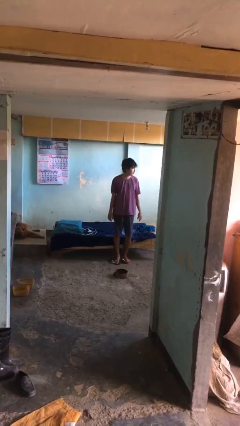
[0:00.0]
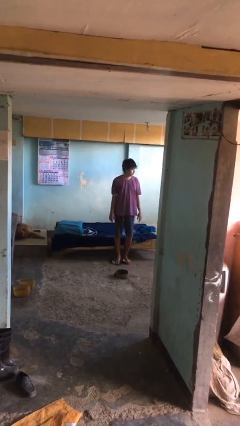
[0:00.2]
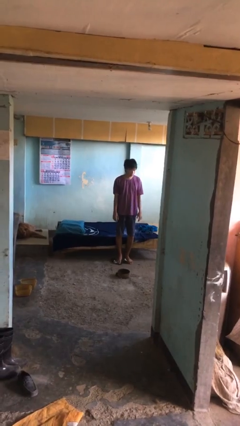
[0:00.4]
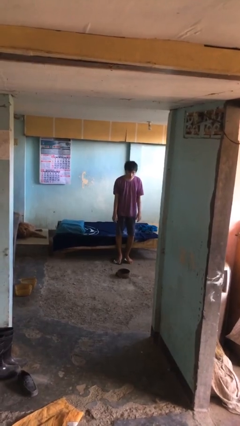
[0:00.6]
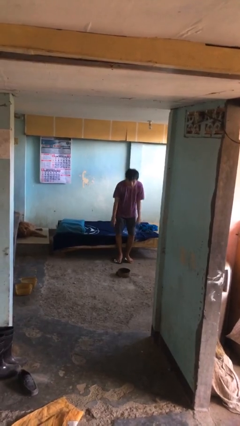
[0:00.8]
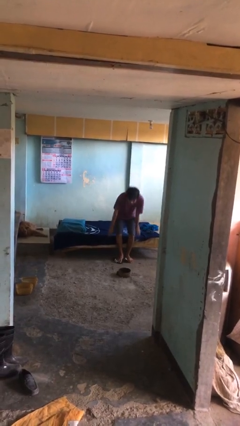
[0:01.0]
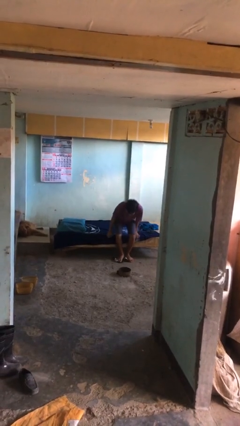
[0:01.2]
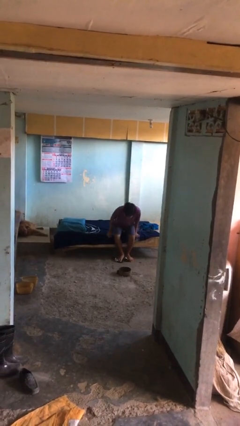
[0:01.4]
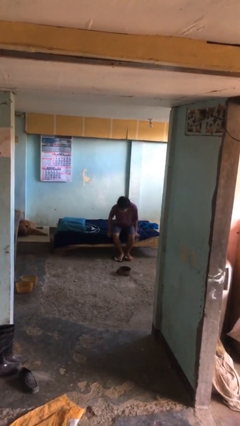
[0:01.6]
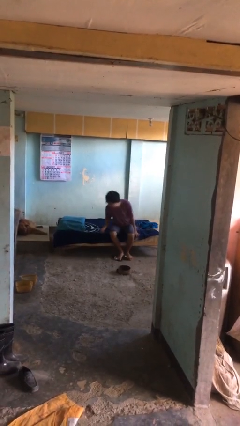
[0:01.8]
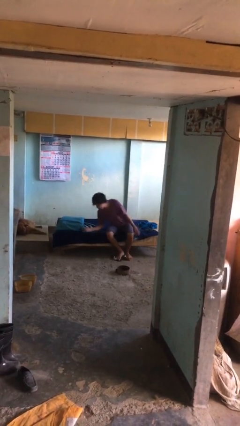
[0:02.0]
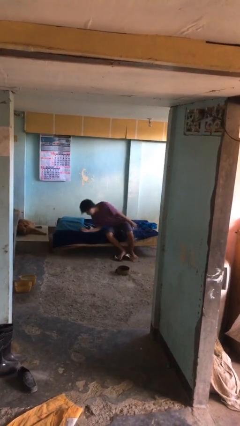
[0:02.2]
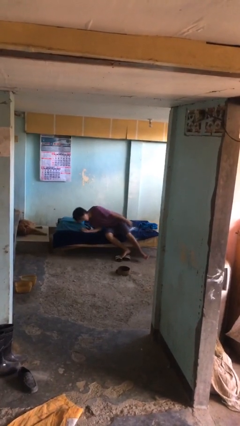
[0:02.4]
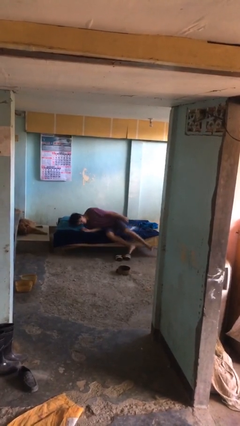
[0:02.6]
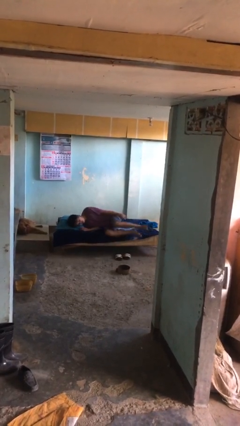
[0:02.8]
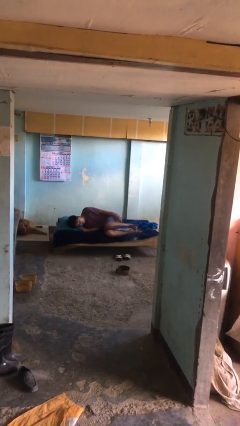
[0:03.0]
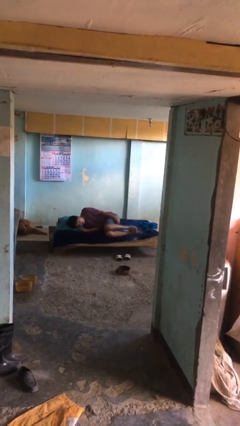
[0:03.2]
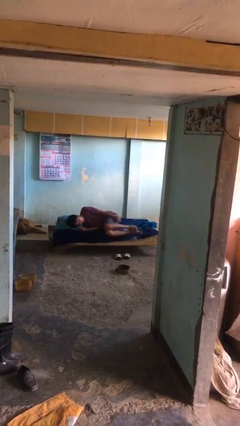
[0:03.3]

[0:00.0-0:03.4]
person lies down on bed

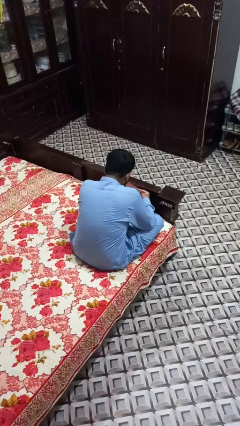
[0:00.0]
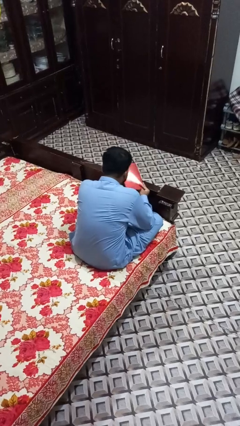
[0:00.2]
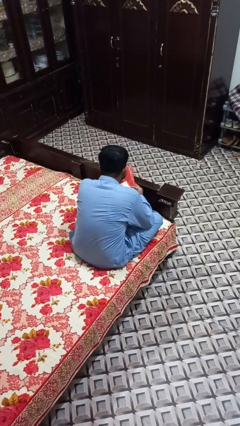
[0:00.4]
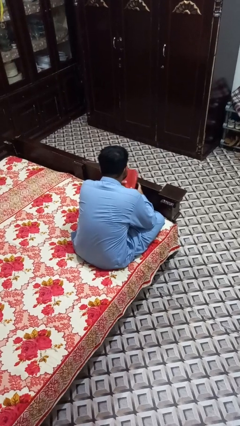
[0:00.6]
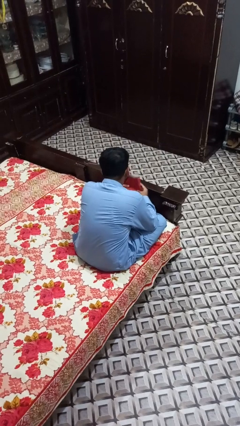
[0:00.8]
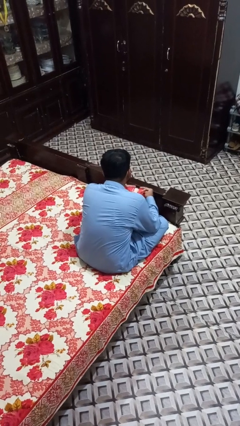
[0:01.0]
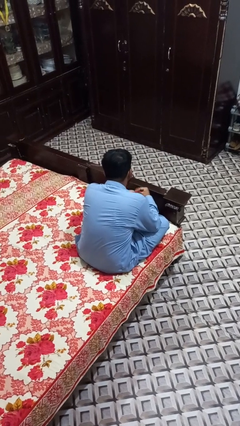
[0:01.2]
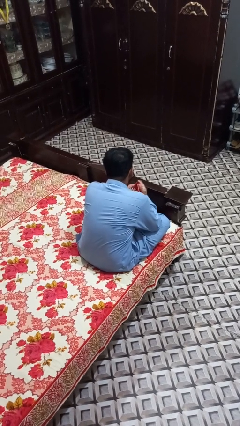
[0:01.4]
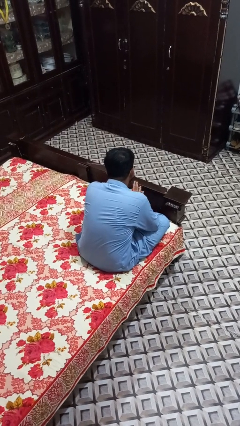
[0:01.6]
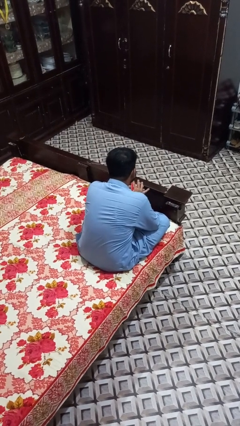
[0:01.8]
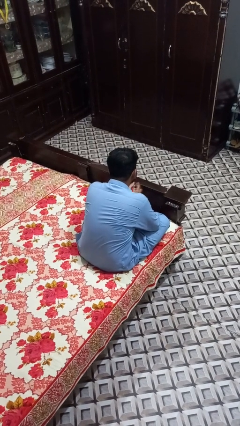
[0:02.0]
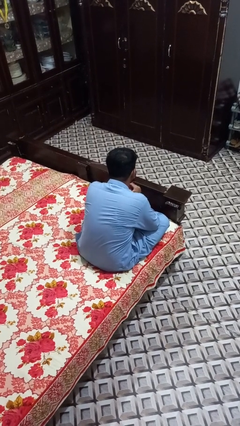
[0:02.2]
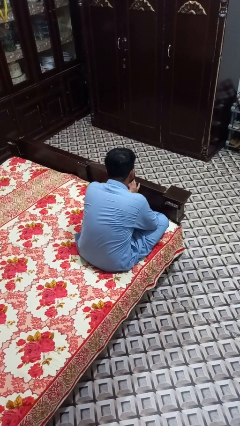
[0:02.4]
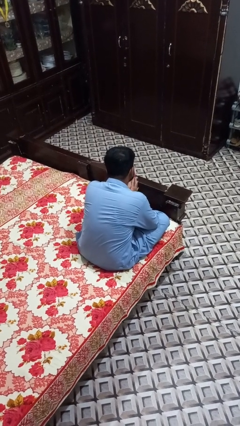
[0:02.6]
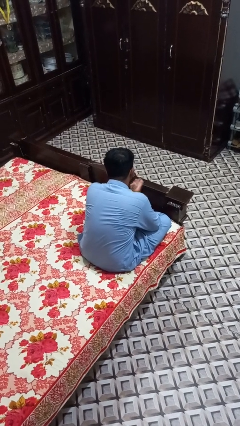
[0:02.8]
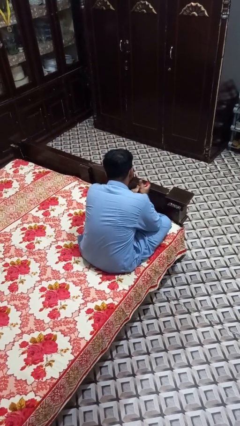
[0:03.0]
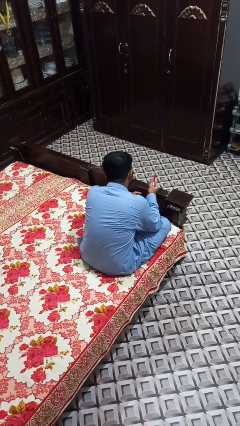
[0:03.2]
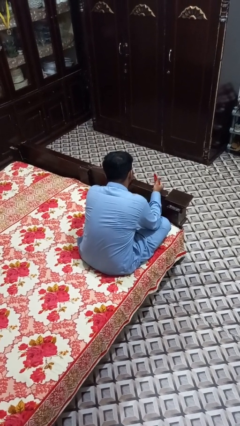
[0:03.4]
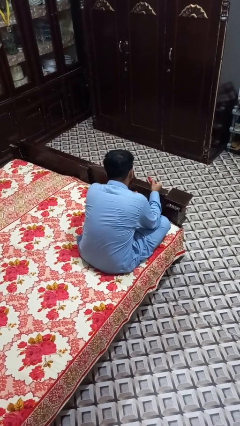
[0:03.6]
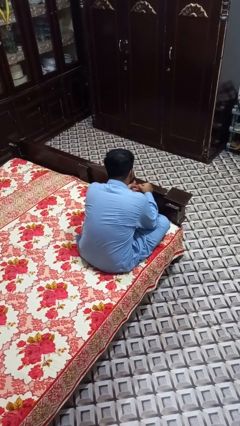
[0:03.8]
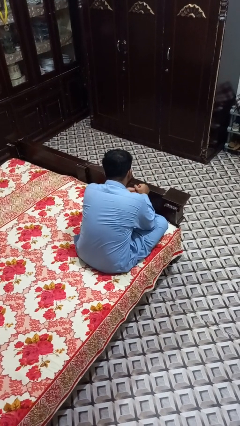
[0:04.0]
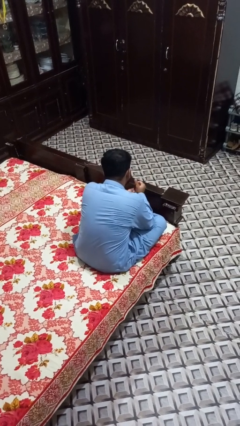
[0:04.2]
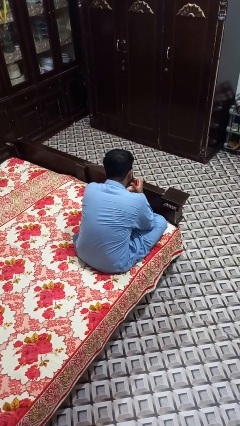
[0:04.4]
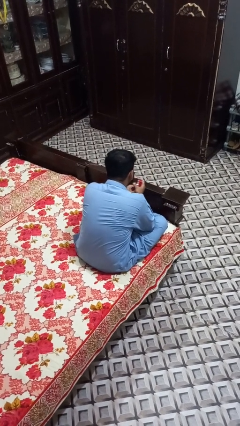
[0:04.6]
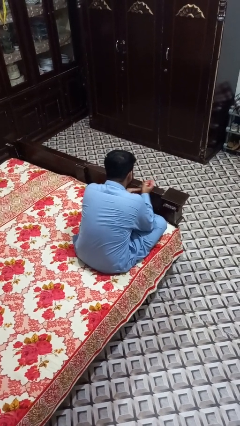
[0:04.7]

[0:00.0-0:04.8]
person crumples paper

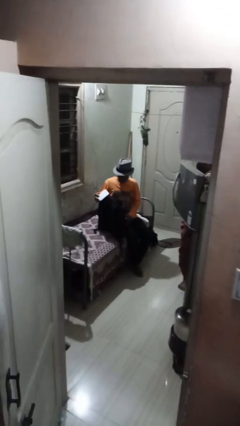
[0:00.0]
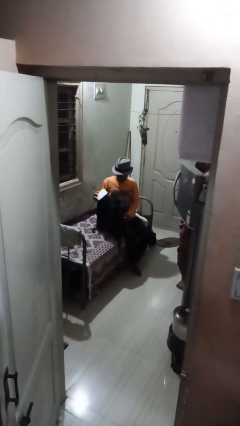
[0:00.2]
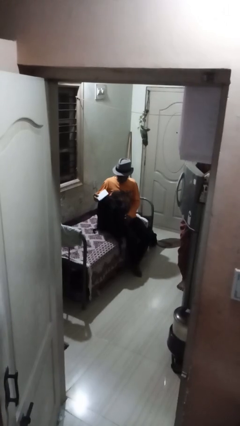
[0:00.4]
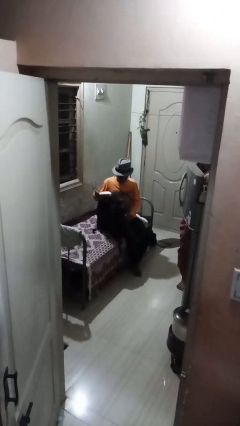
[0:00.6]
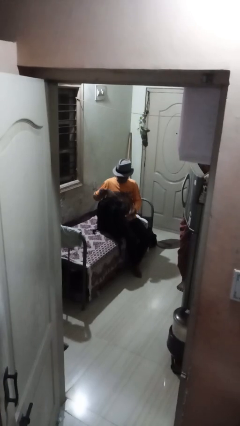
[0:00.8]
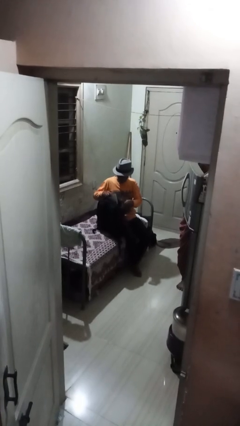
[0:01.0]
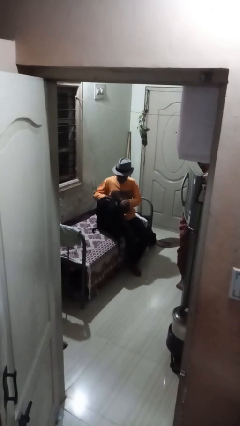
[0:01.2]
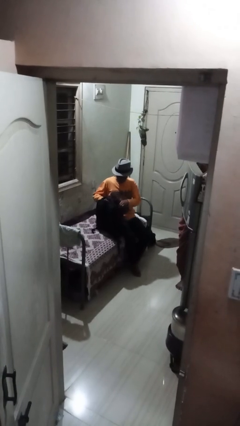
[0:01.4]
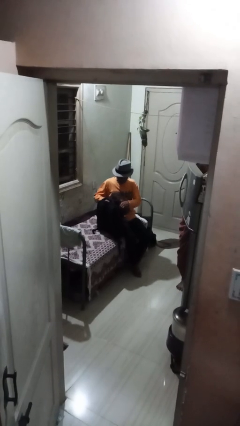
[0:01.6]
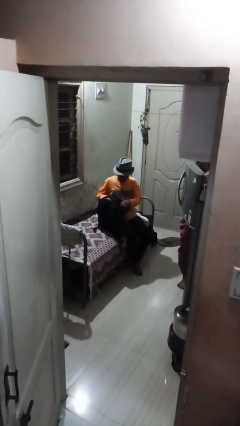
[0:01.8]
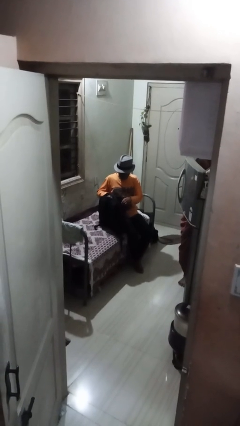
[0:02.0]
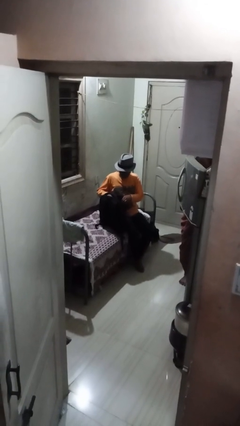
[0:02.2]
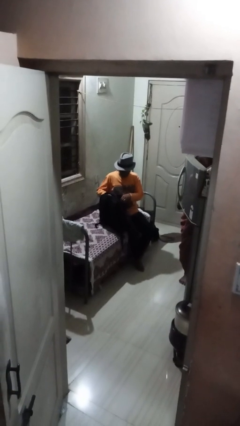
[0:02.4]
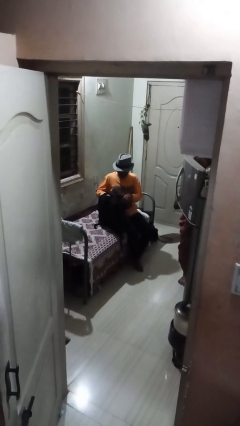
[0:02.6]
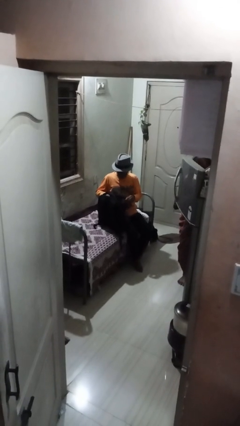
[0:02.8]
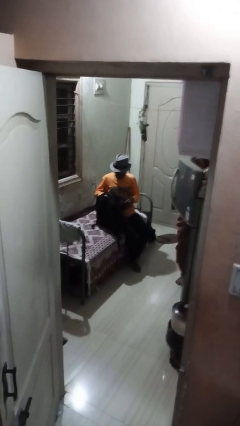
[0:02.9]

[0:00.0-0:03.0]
person puts object into backpack

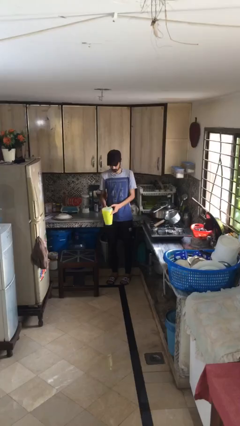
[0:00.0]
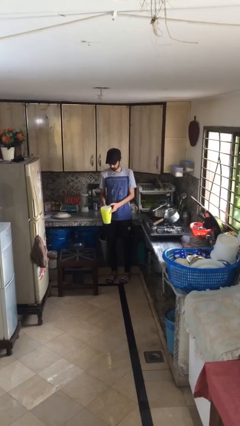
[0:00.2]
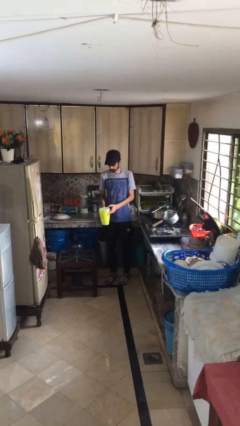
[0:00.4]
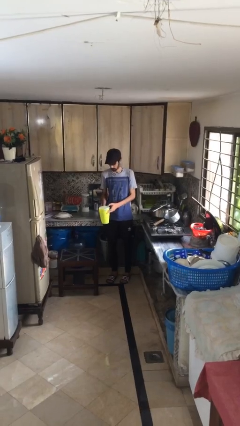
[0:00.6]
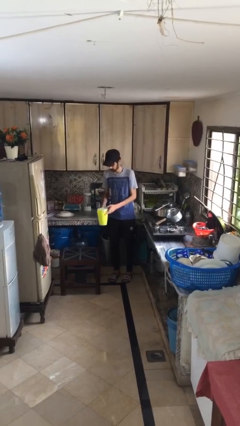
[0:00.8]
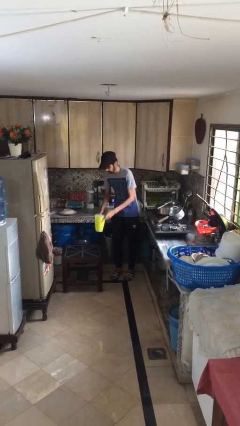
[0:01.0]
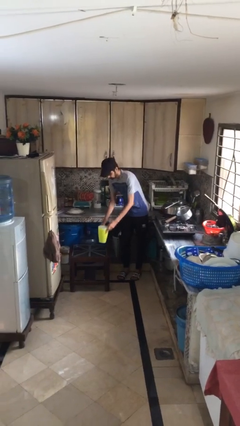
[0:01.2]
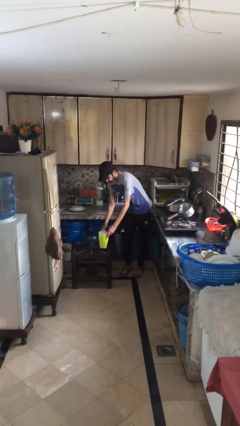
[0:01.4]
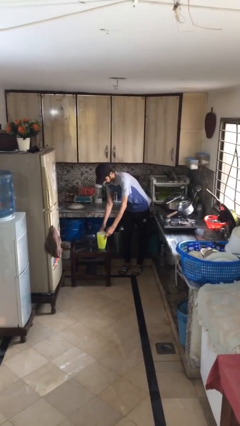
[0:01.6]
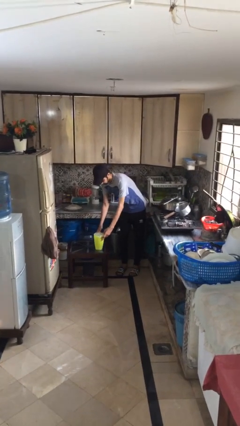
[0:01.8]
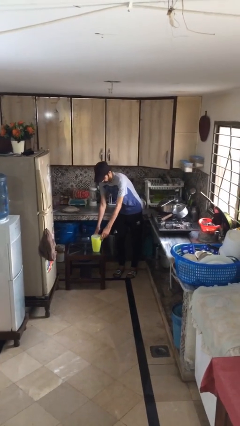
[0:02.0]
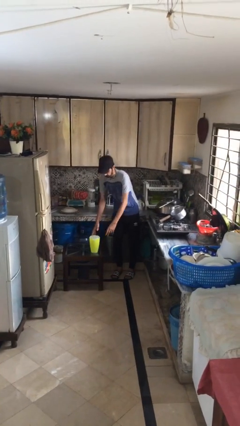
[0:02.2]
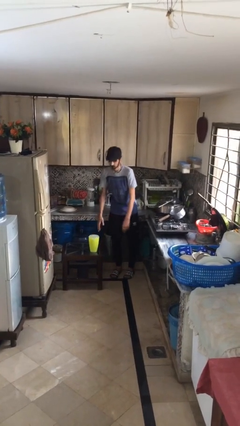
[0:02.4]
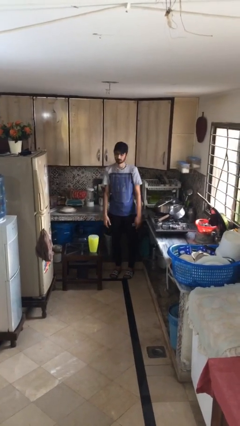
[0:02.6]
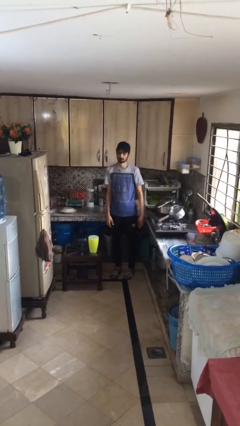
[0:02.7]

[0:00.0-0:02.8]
person puts down object on table

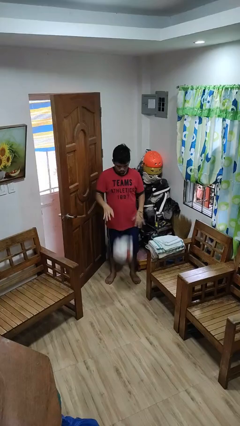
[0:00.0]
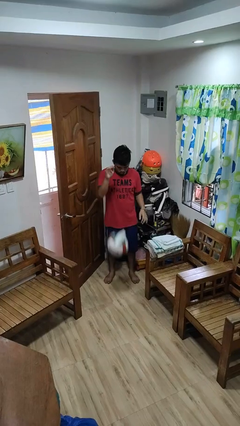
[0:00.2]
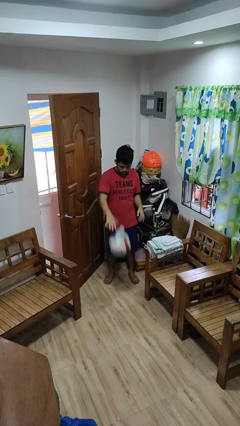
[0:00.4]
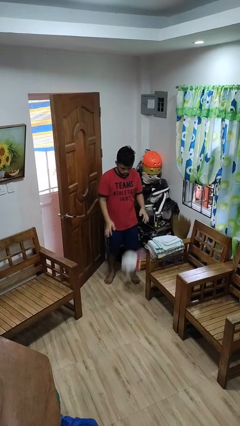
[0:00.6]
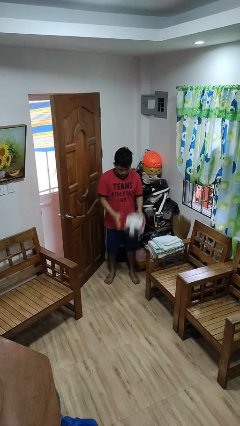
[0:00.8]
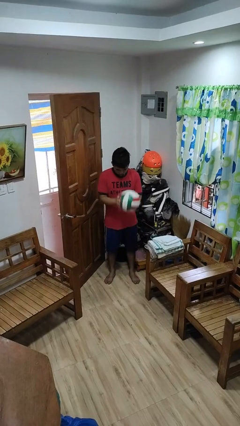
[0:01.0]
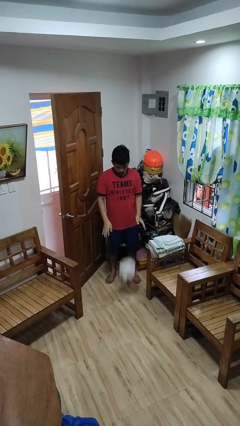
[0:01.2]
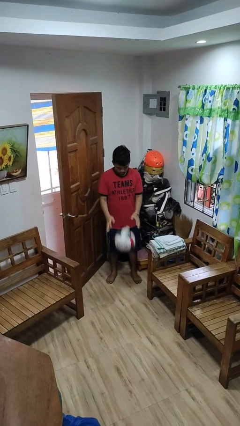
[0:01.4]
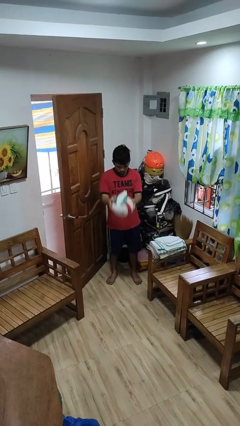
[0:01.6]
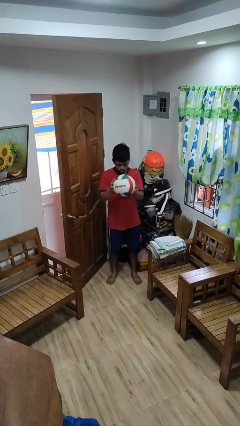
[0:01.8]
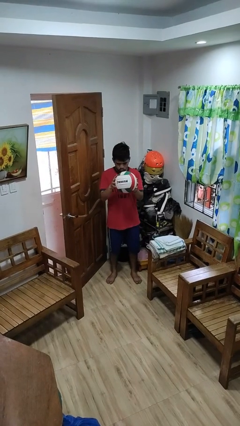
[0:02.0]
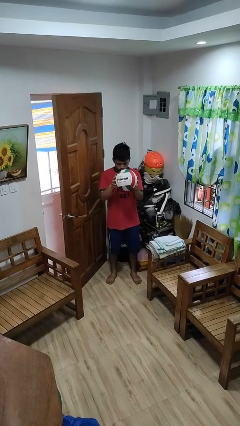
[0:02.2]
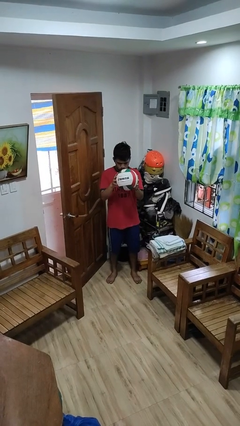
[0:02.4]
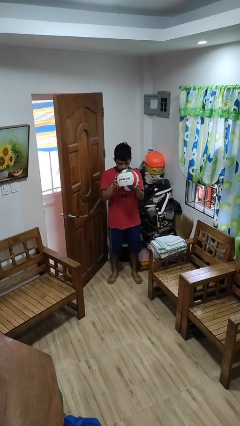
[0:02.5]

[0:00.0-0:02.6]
person bounces ball on floor

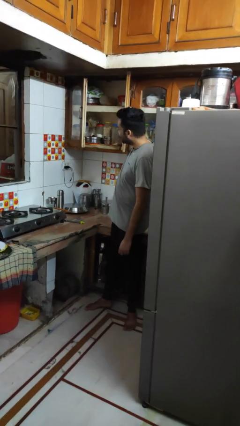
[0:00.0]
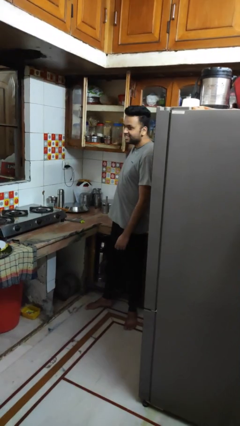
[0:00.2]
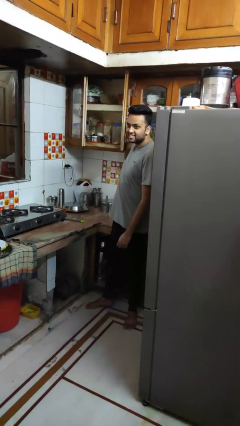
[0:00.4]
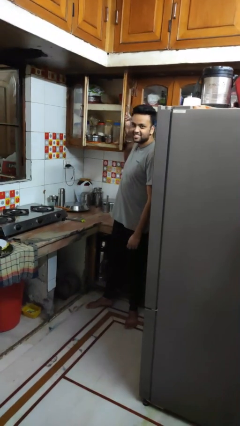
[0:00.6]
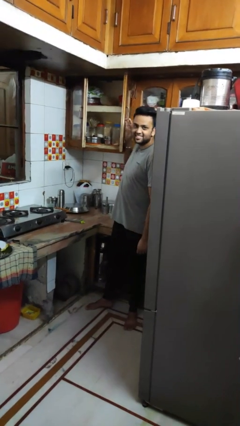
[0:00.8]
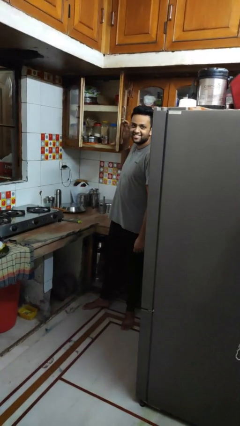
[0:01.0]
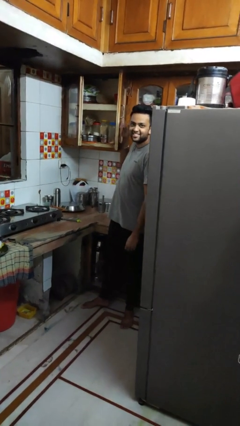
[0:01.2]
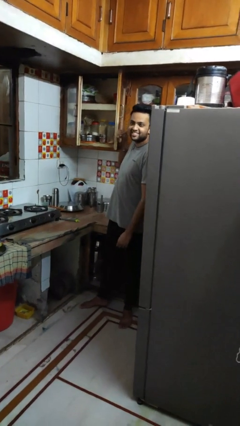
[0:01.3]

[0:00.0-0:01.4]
person opens cabinet
